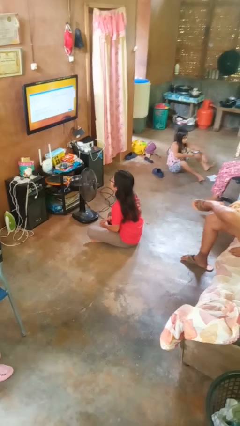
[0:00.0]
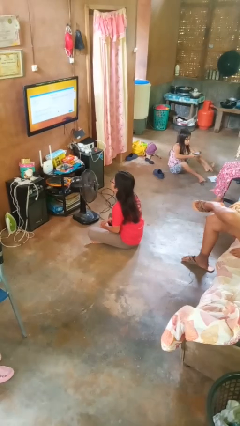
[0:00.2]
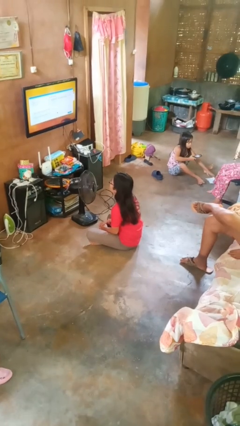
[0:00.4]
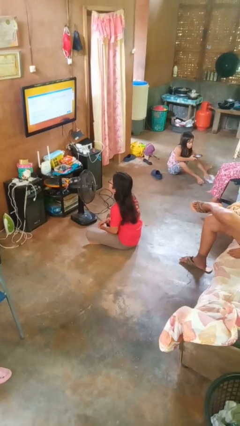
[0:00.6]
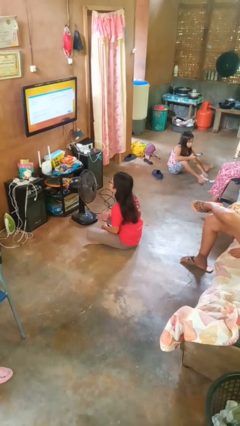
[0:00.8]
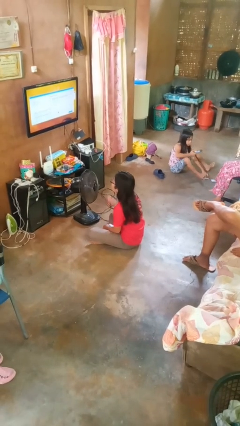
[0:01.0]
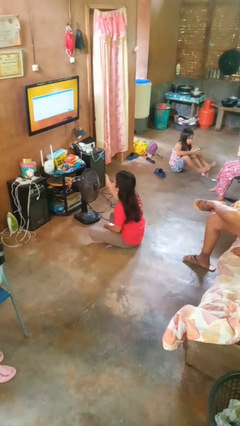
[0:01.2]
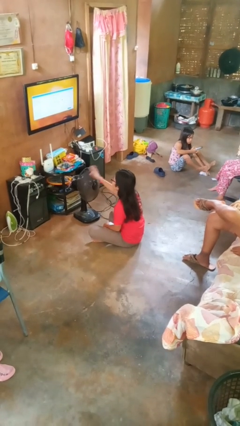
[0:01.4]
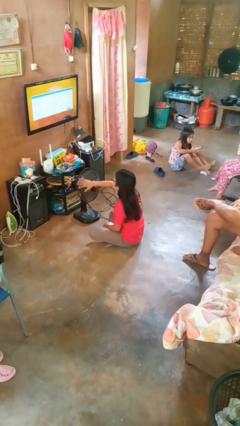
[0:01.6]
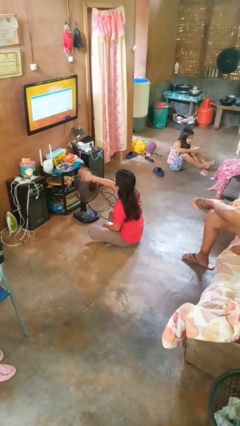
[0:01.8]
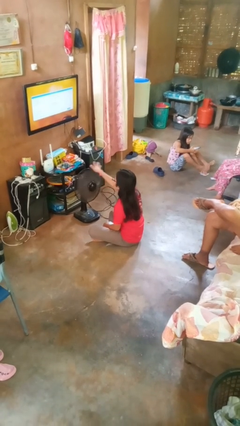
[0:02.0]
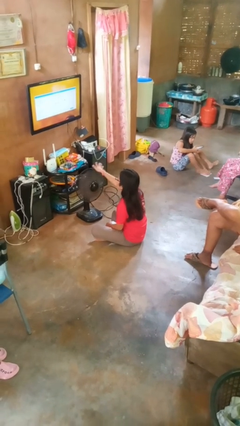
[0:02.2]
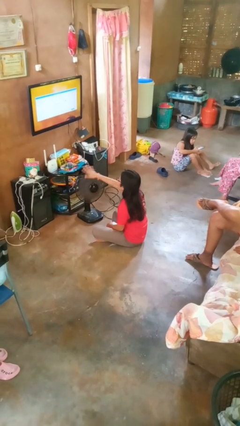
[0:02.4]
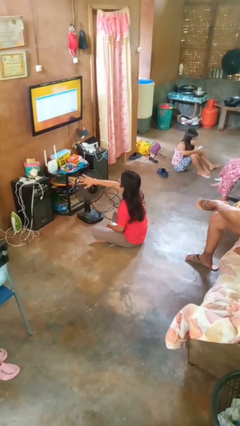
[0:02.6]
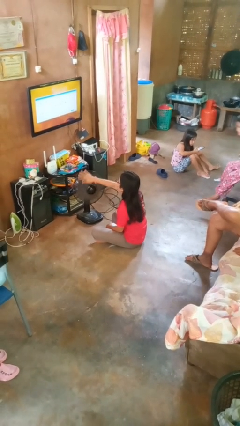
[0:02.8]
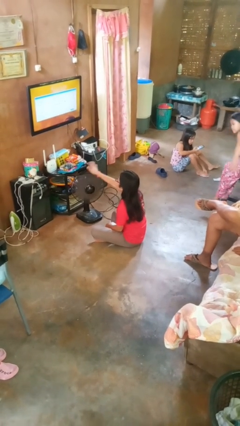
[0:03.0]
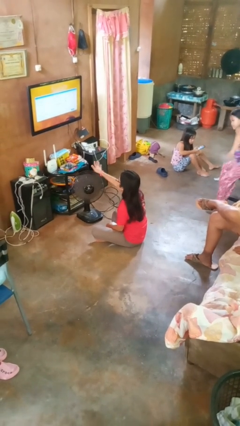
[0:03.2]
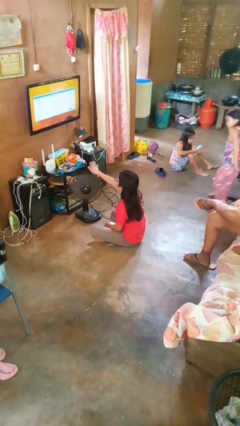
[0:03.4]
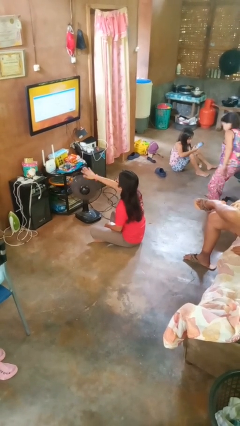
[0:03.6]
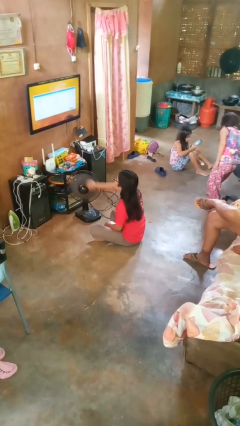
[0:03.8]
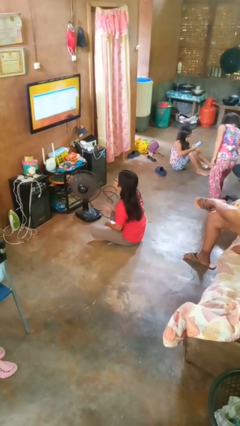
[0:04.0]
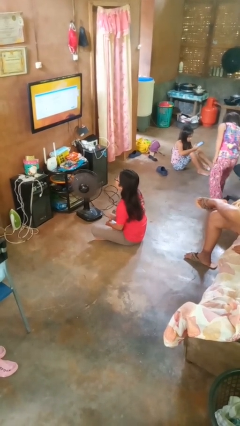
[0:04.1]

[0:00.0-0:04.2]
person waves hand over object

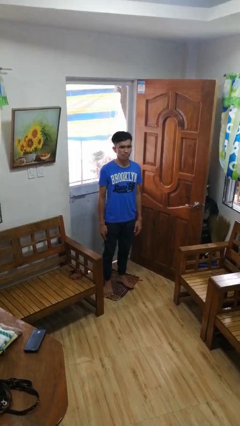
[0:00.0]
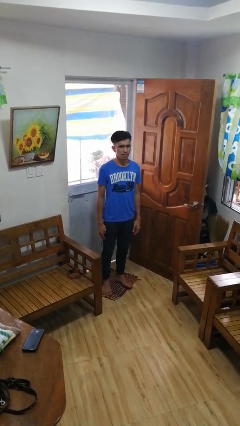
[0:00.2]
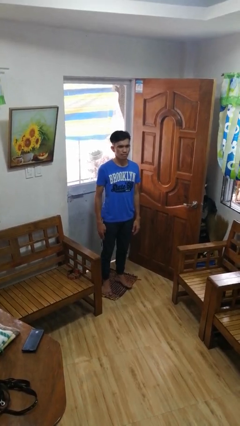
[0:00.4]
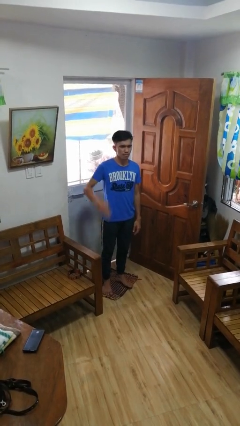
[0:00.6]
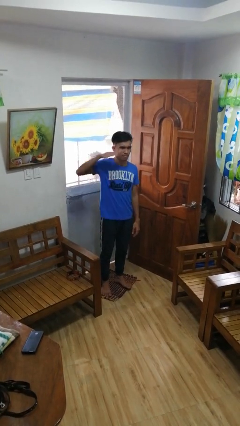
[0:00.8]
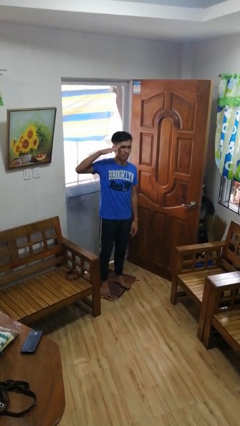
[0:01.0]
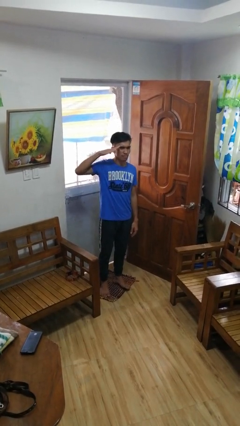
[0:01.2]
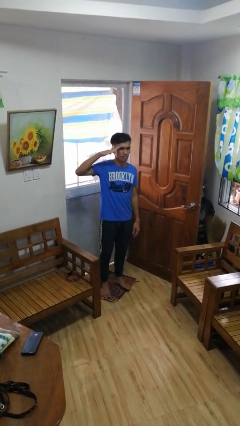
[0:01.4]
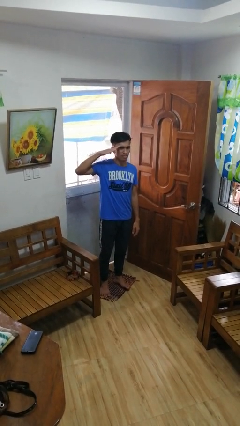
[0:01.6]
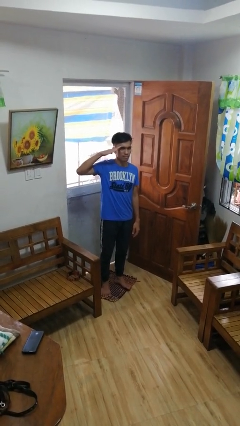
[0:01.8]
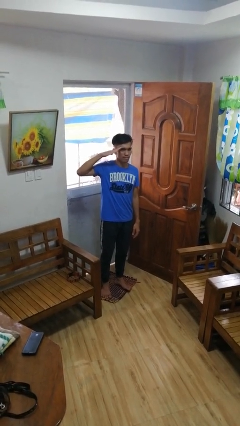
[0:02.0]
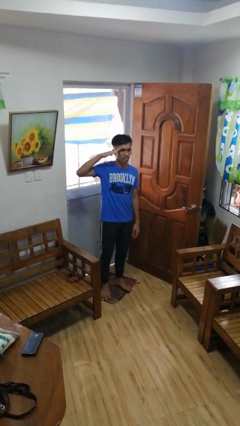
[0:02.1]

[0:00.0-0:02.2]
person salutes

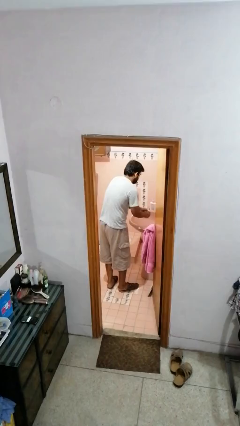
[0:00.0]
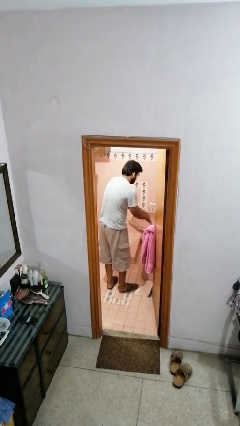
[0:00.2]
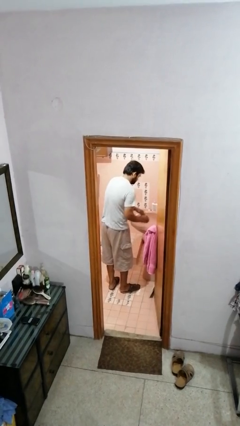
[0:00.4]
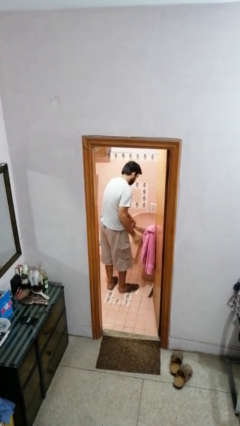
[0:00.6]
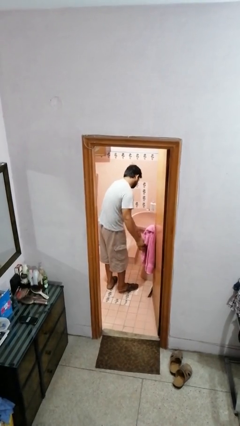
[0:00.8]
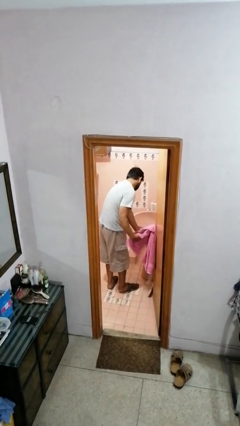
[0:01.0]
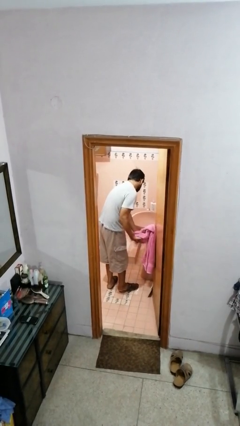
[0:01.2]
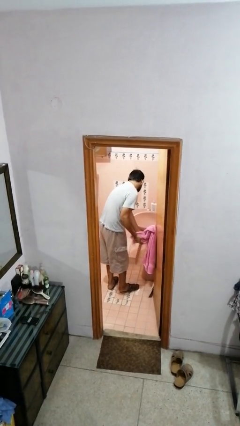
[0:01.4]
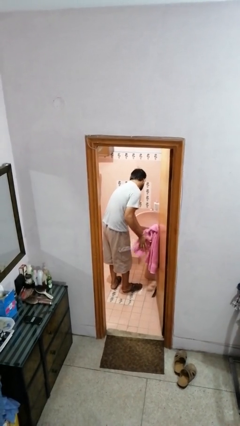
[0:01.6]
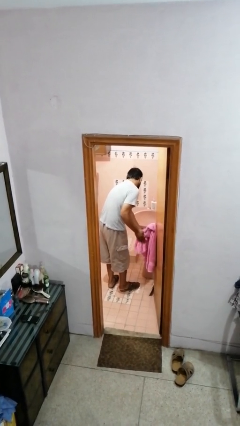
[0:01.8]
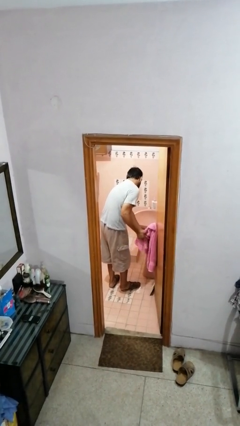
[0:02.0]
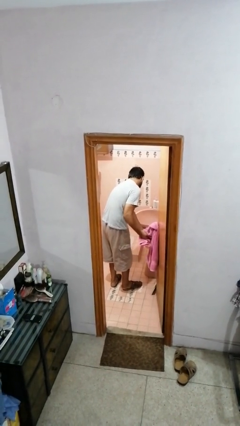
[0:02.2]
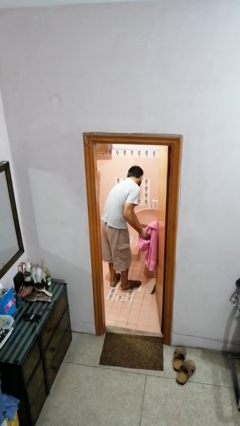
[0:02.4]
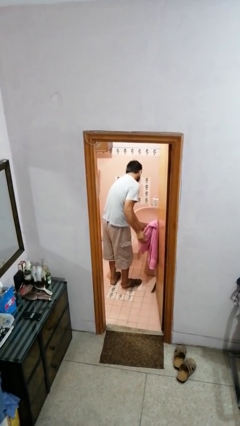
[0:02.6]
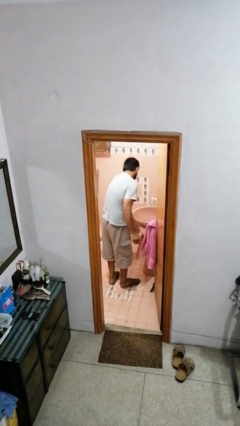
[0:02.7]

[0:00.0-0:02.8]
person dries hands with towel

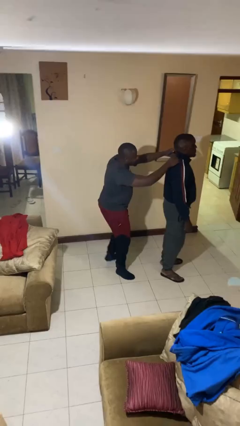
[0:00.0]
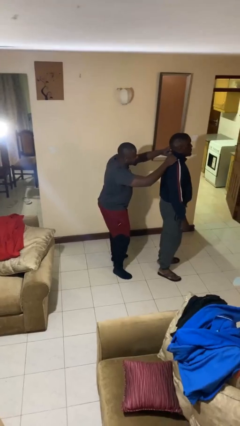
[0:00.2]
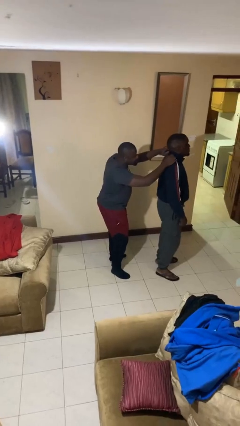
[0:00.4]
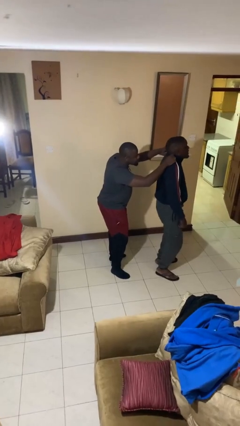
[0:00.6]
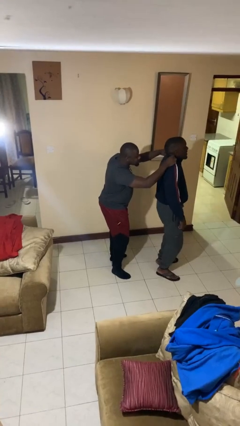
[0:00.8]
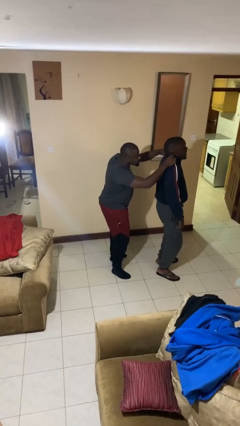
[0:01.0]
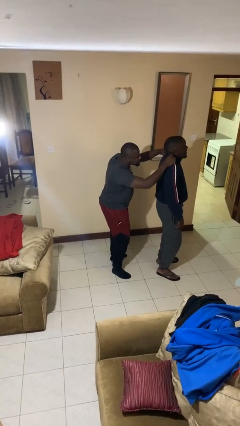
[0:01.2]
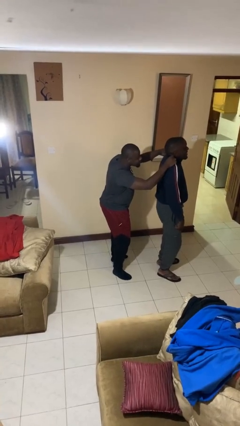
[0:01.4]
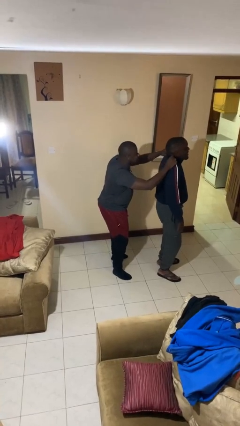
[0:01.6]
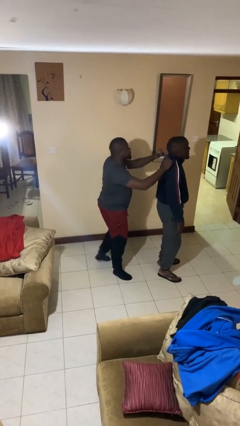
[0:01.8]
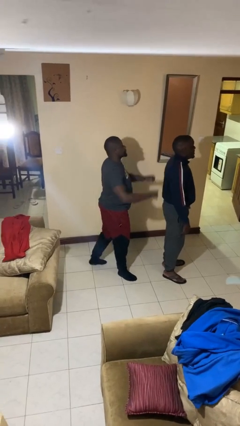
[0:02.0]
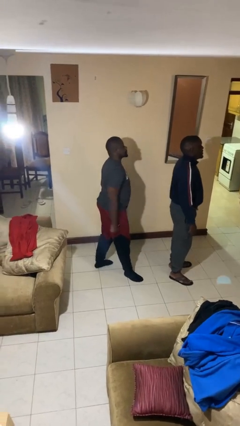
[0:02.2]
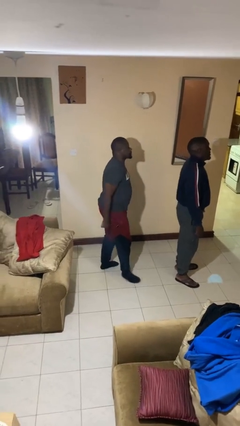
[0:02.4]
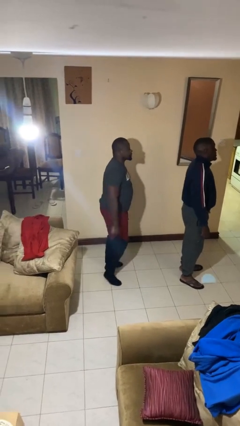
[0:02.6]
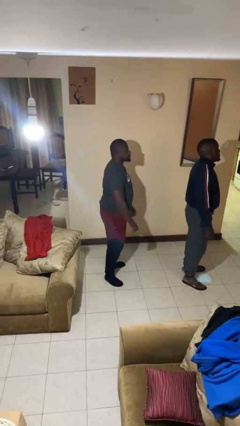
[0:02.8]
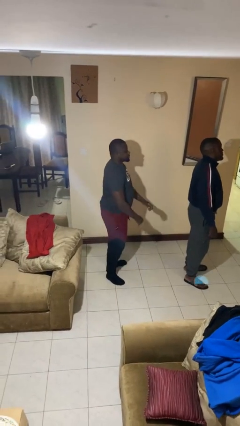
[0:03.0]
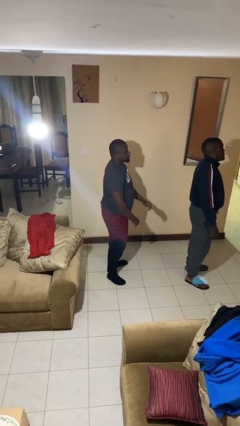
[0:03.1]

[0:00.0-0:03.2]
person tickles person

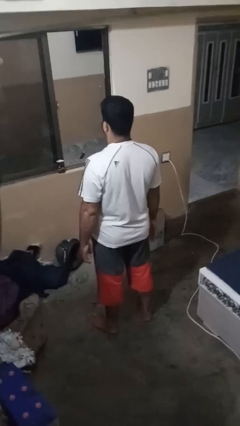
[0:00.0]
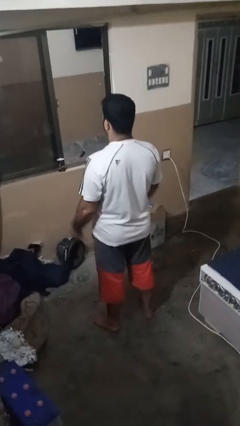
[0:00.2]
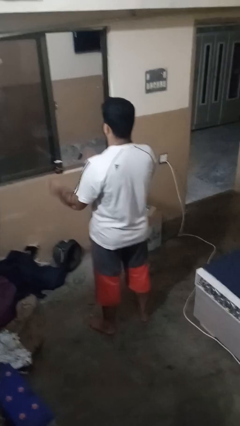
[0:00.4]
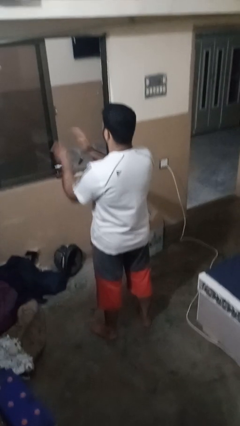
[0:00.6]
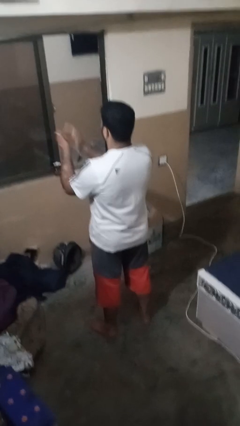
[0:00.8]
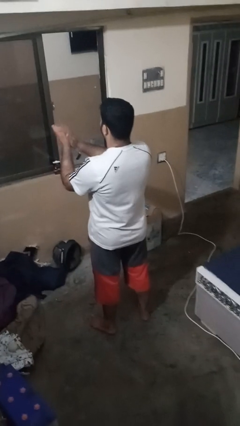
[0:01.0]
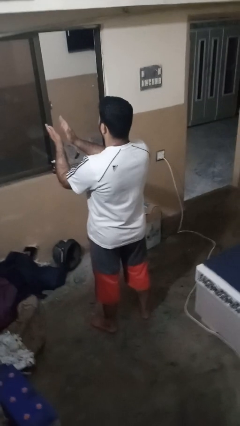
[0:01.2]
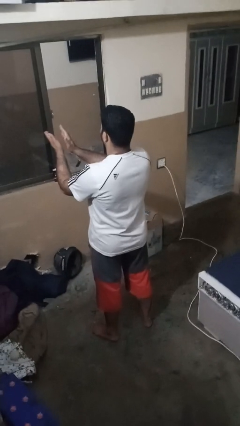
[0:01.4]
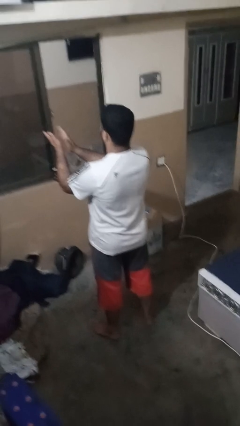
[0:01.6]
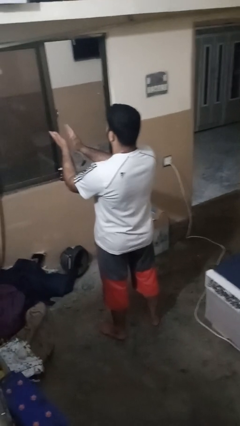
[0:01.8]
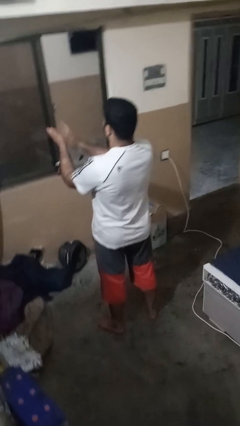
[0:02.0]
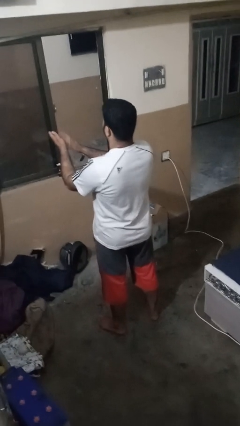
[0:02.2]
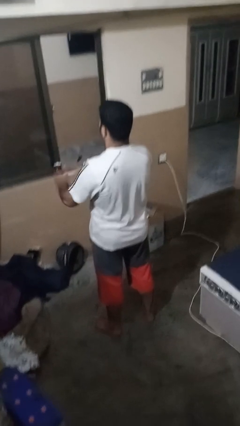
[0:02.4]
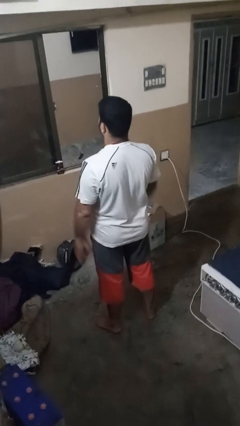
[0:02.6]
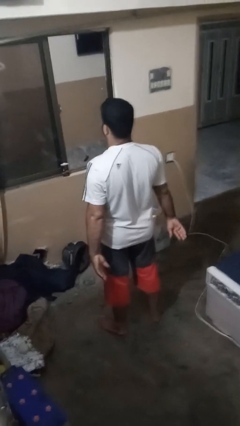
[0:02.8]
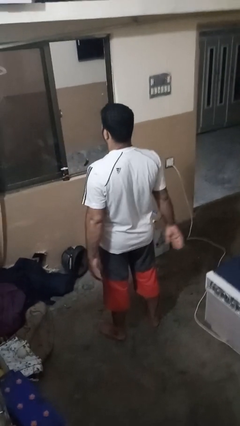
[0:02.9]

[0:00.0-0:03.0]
person claps hands

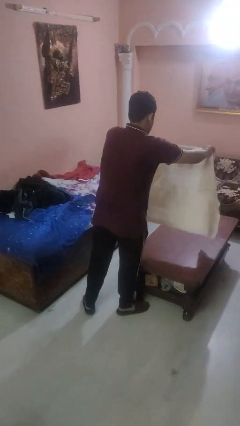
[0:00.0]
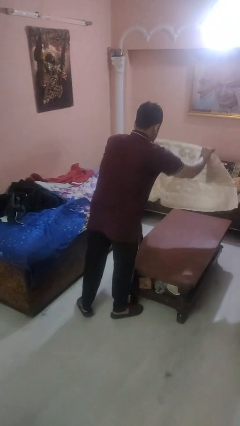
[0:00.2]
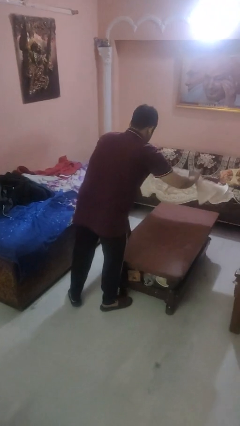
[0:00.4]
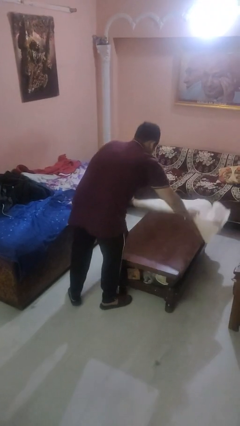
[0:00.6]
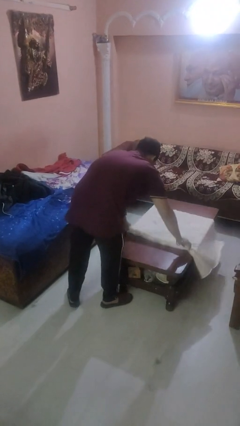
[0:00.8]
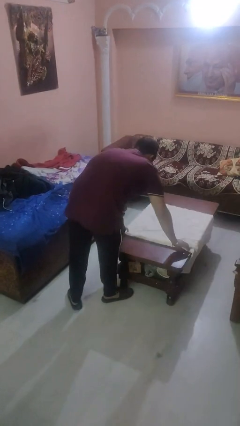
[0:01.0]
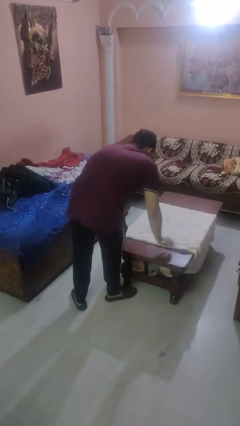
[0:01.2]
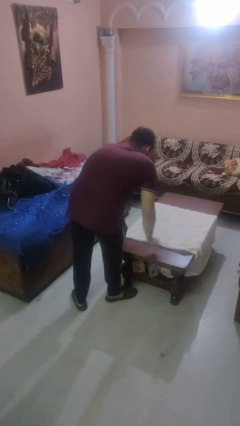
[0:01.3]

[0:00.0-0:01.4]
person spreads tablecloth

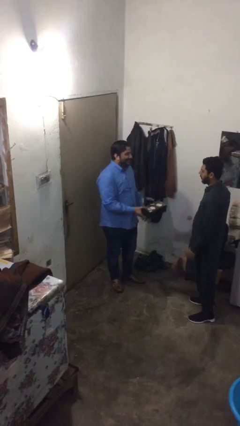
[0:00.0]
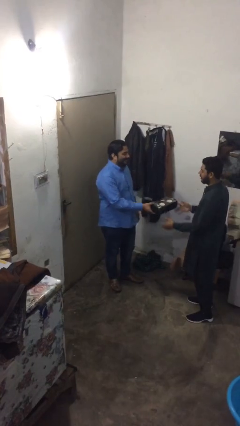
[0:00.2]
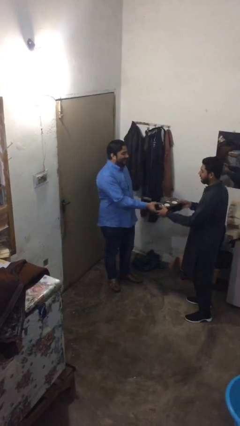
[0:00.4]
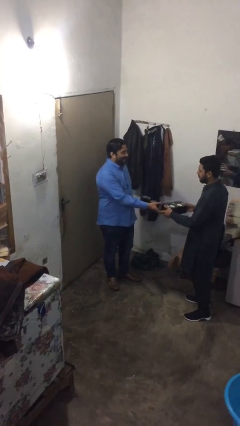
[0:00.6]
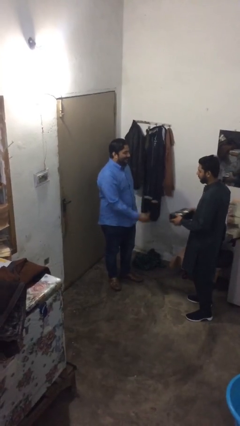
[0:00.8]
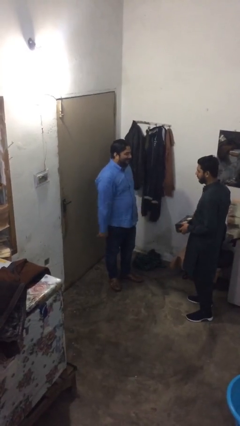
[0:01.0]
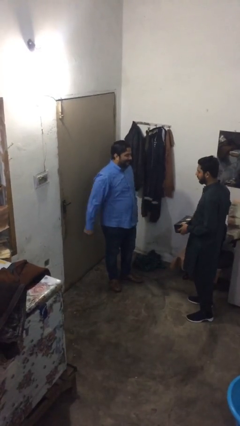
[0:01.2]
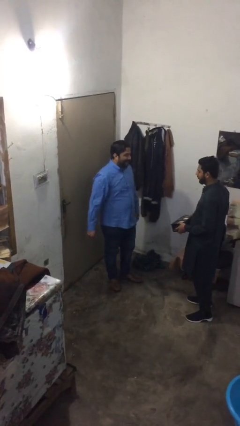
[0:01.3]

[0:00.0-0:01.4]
person transfers object to person
